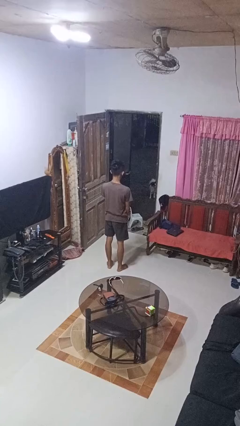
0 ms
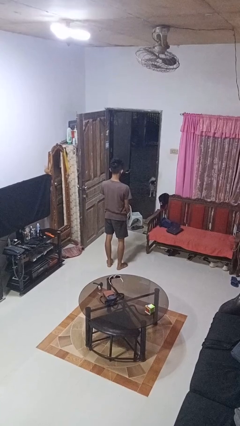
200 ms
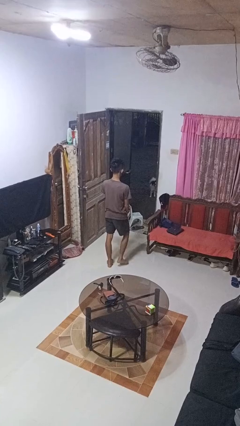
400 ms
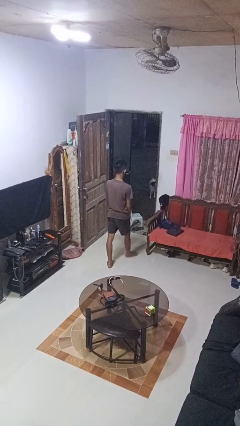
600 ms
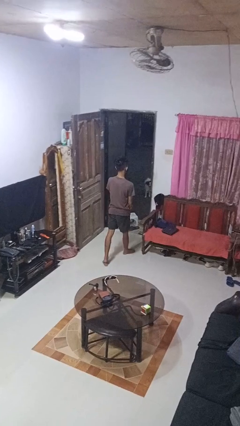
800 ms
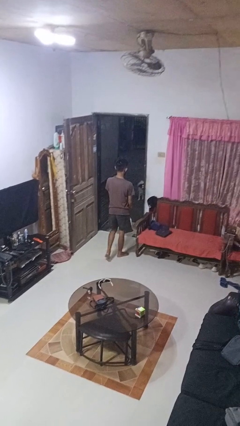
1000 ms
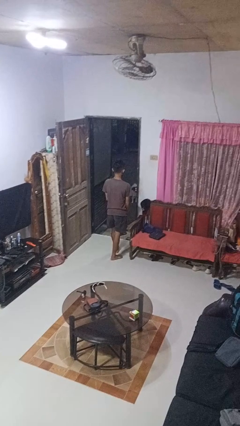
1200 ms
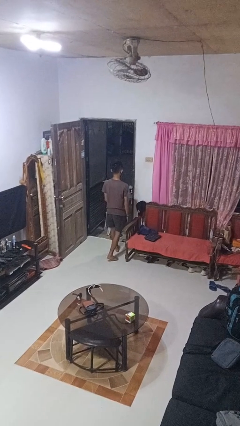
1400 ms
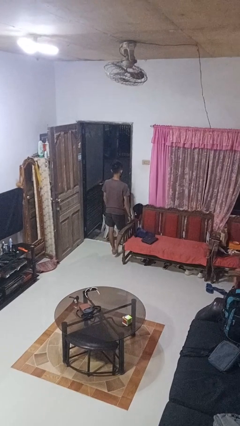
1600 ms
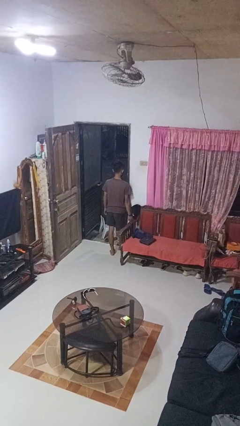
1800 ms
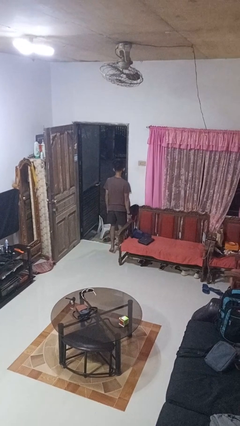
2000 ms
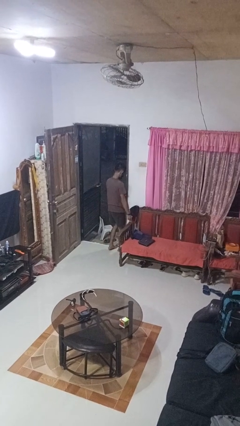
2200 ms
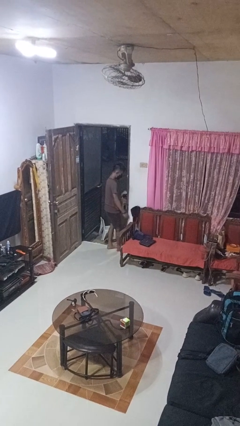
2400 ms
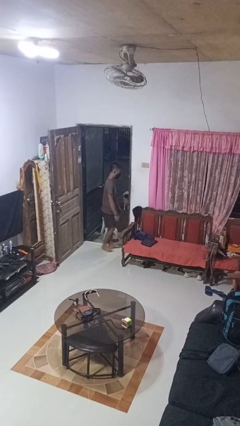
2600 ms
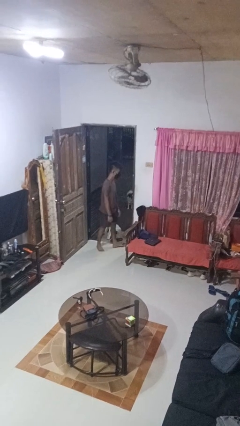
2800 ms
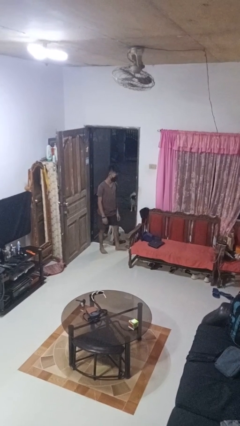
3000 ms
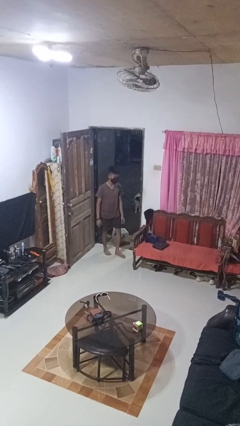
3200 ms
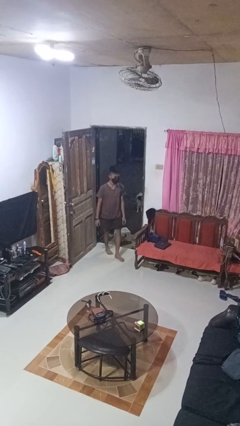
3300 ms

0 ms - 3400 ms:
person bumps into wall

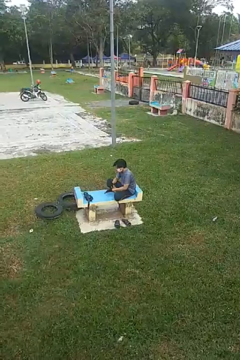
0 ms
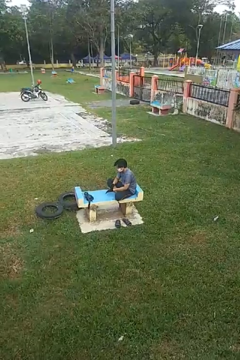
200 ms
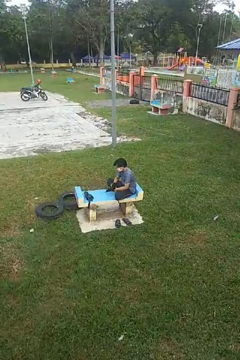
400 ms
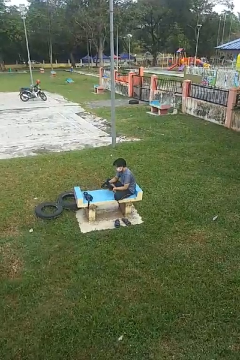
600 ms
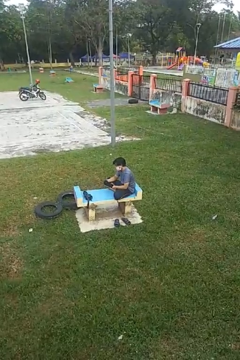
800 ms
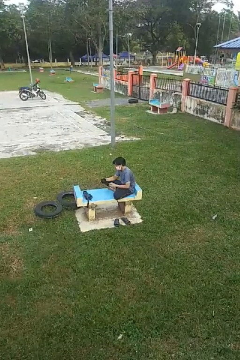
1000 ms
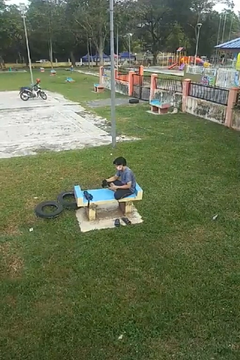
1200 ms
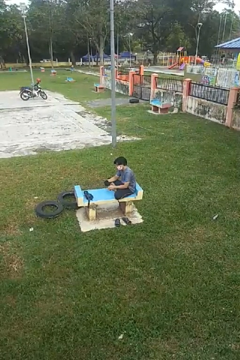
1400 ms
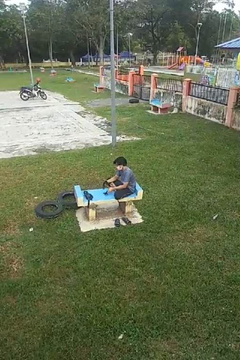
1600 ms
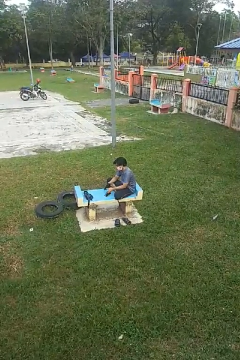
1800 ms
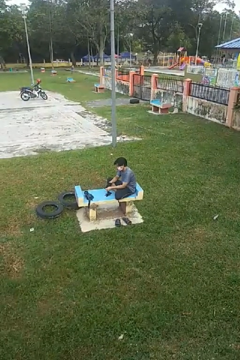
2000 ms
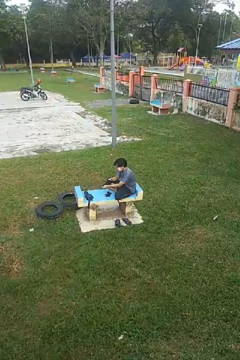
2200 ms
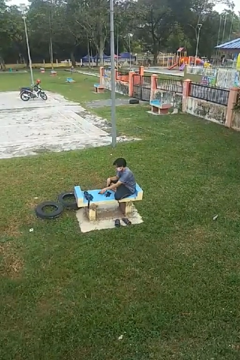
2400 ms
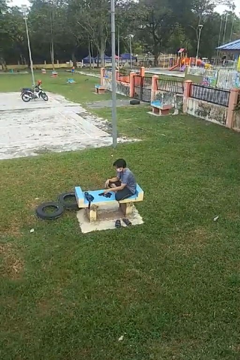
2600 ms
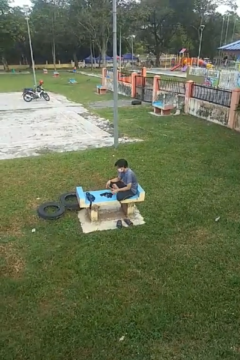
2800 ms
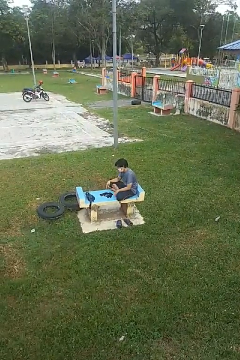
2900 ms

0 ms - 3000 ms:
person takes off gloves

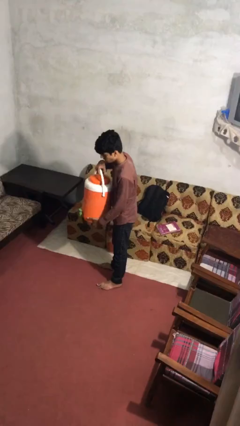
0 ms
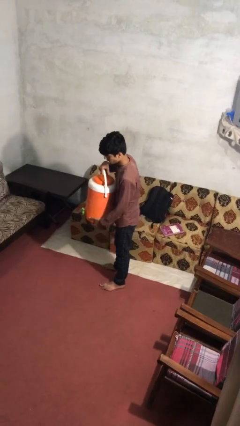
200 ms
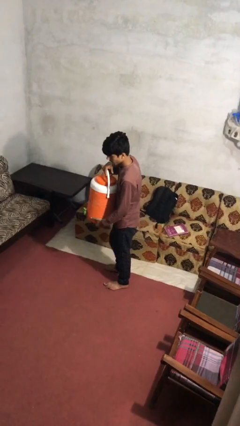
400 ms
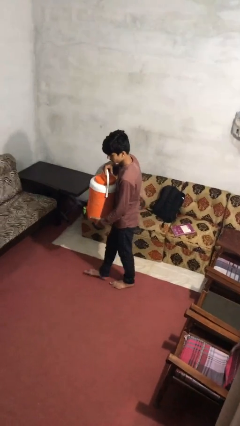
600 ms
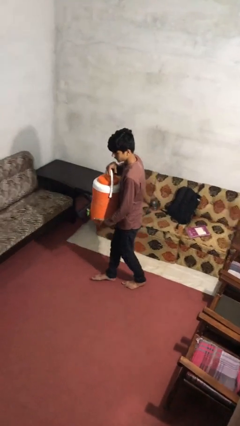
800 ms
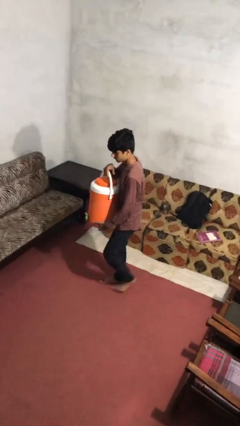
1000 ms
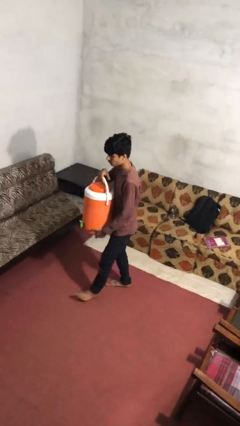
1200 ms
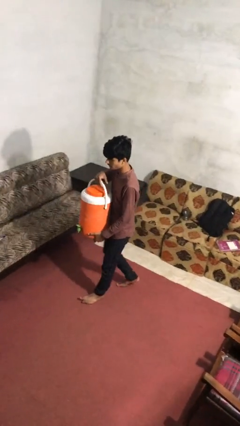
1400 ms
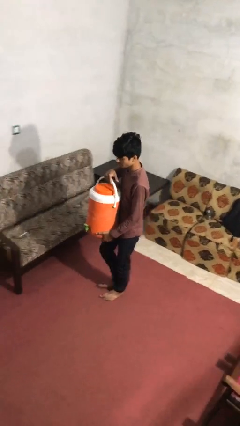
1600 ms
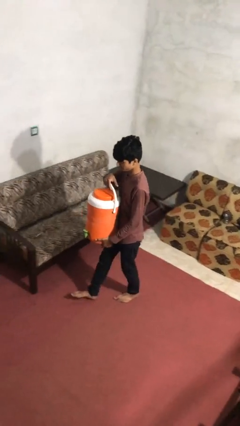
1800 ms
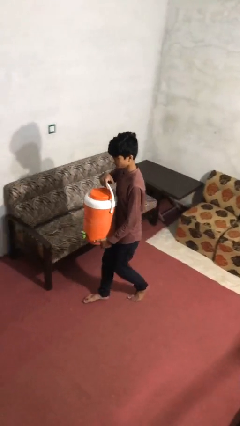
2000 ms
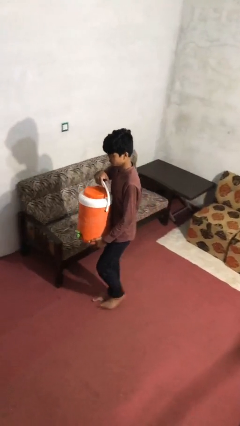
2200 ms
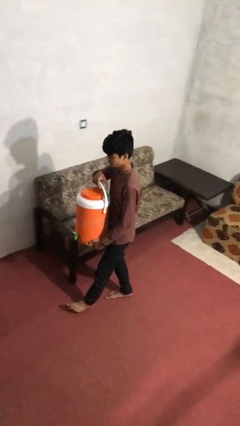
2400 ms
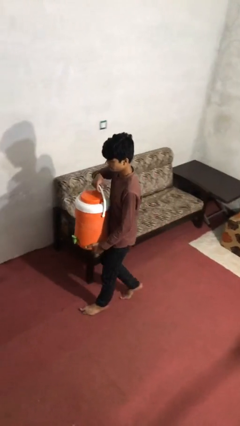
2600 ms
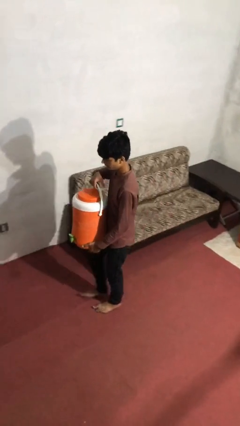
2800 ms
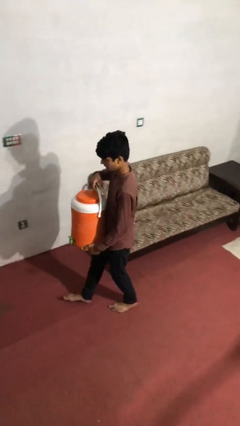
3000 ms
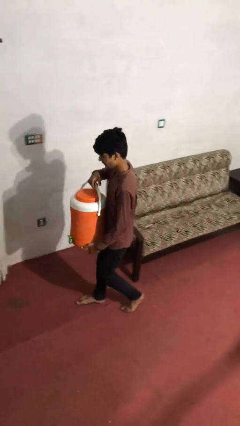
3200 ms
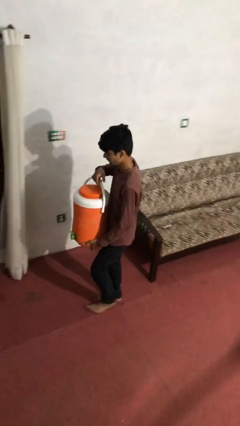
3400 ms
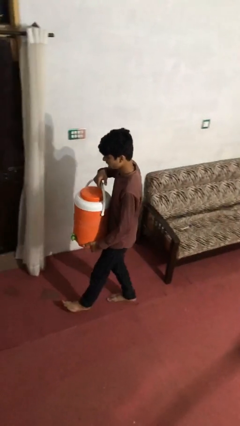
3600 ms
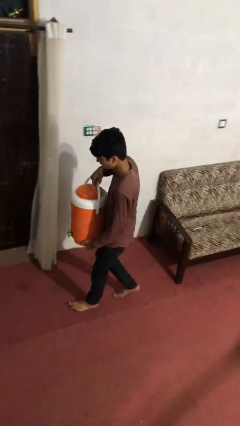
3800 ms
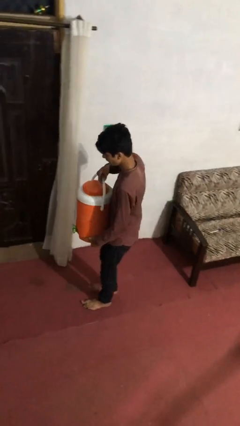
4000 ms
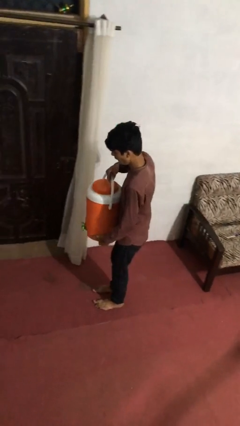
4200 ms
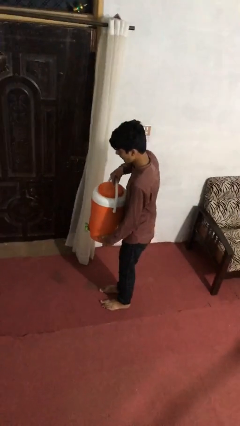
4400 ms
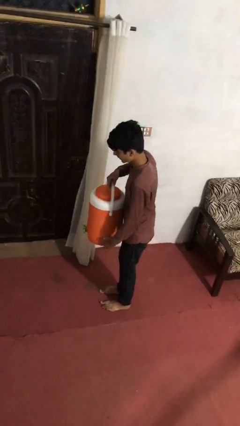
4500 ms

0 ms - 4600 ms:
person carries heavy object

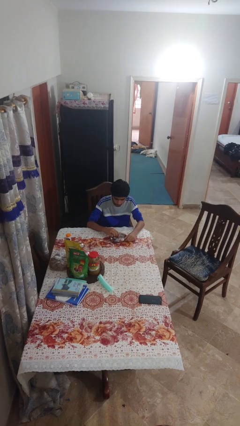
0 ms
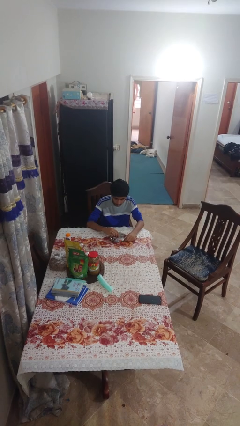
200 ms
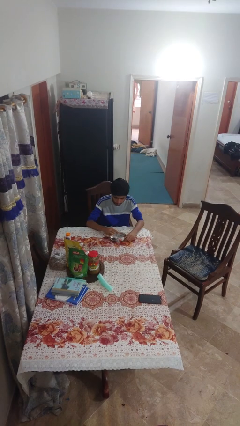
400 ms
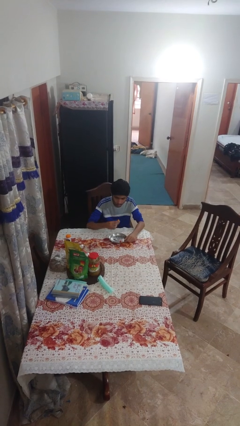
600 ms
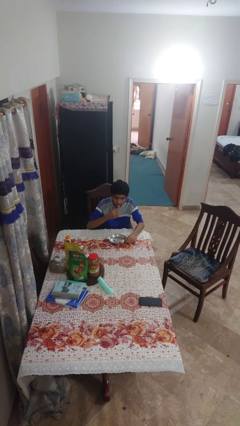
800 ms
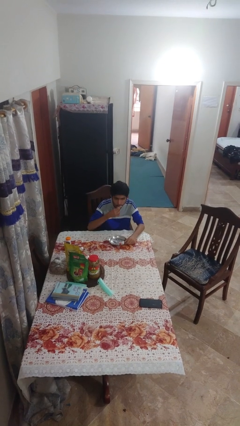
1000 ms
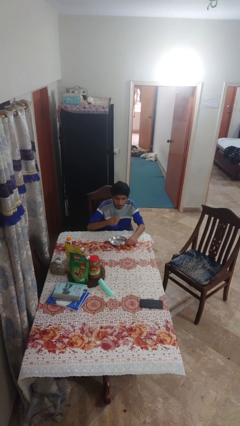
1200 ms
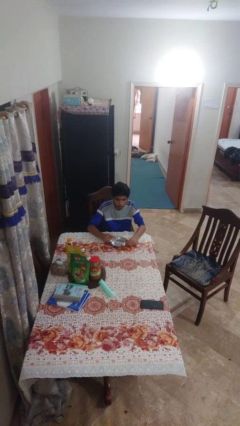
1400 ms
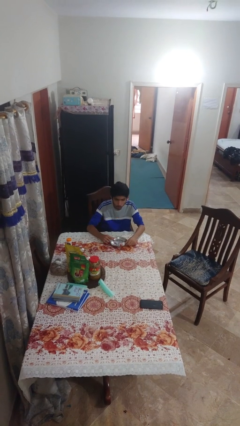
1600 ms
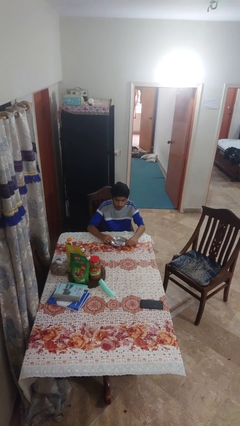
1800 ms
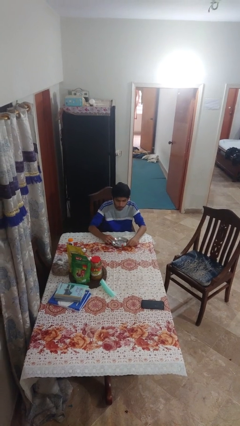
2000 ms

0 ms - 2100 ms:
person eats with hands

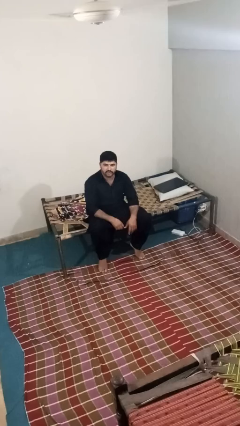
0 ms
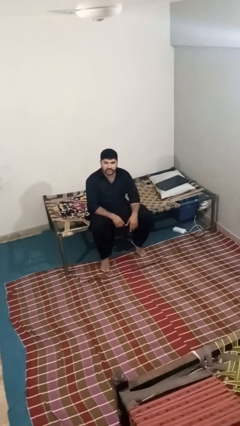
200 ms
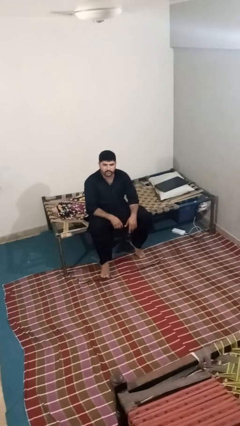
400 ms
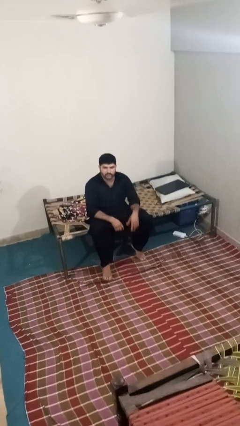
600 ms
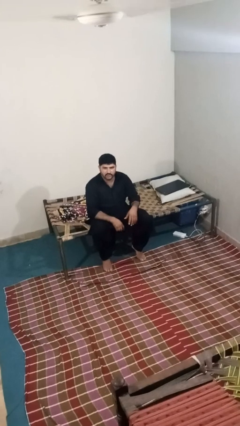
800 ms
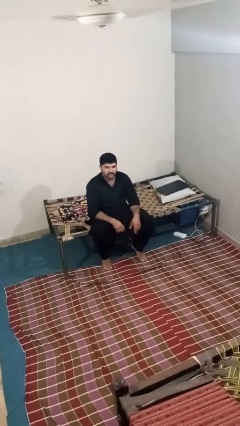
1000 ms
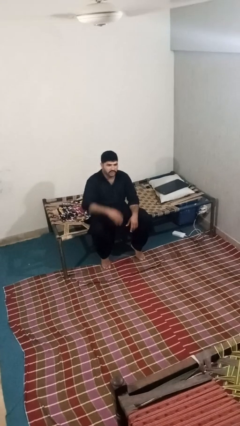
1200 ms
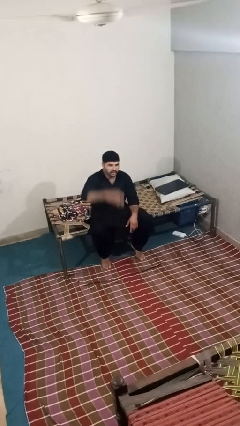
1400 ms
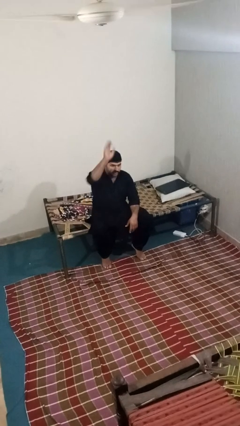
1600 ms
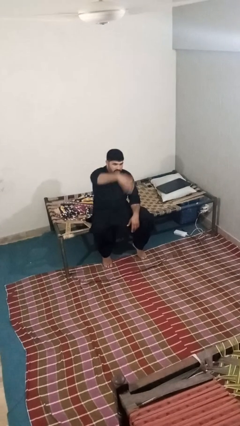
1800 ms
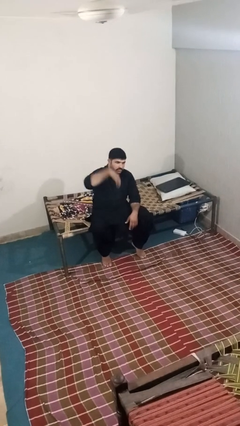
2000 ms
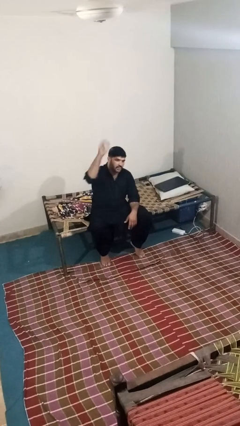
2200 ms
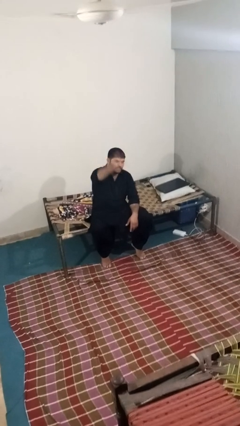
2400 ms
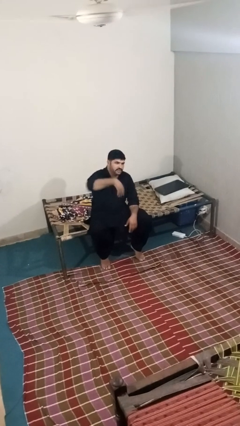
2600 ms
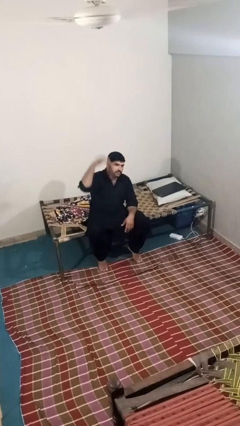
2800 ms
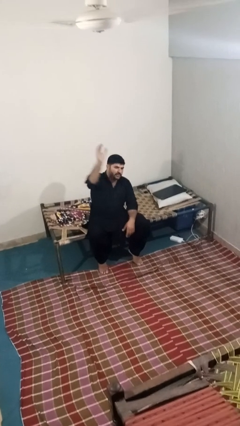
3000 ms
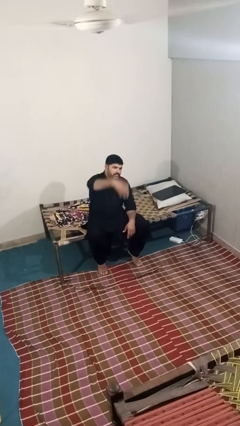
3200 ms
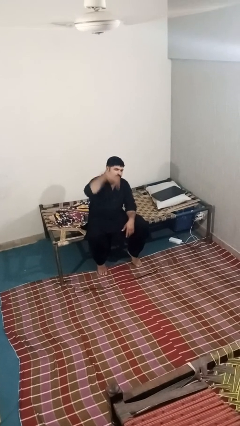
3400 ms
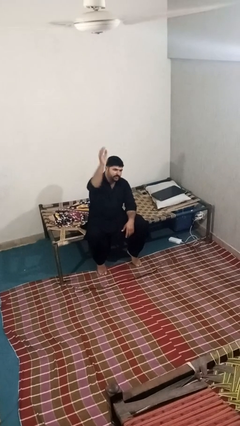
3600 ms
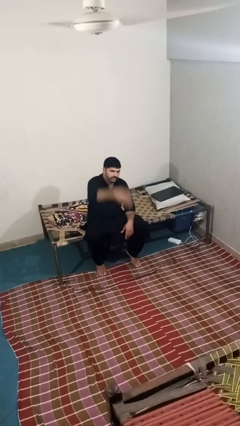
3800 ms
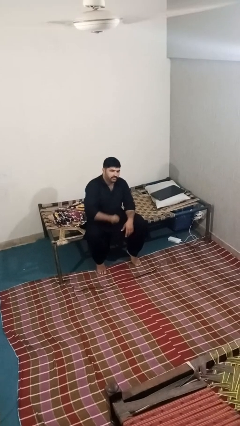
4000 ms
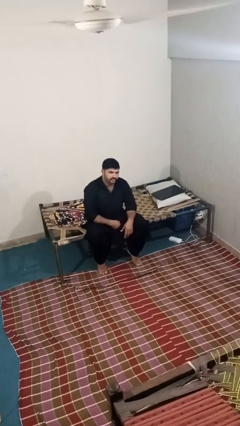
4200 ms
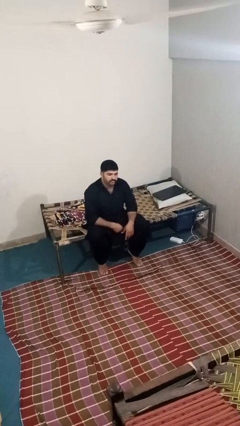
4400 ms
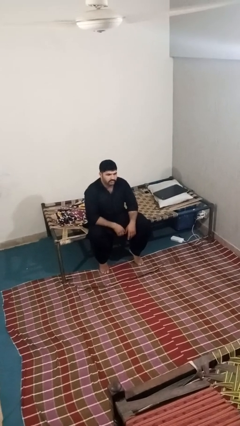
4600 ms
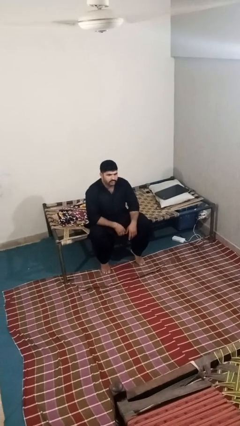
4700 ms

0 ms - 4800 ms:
person gestures come here

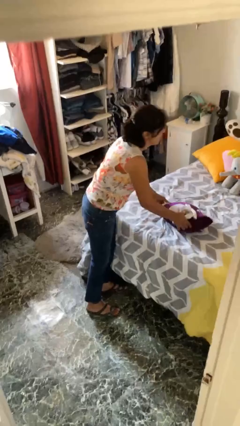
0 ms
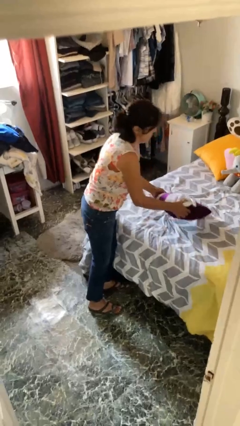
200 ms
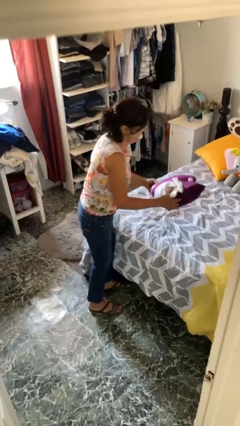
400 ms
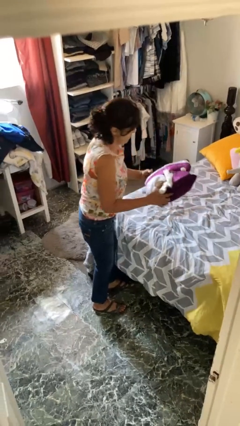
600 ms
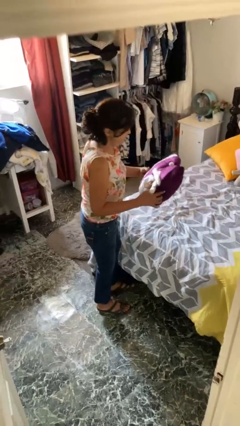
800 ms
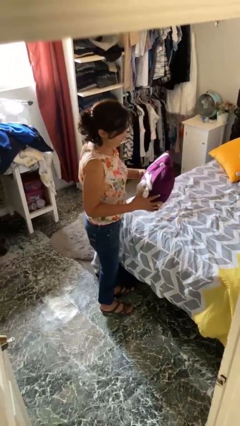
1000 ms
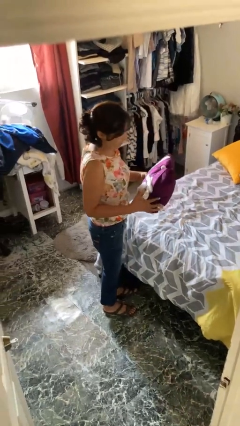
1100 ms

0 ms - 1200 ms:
person picks up object from bed
